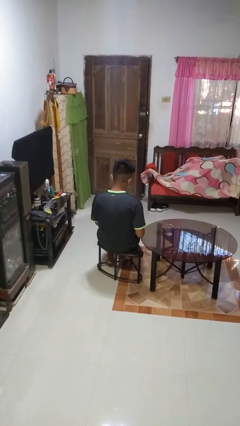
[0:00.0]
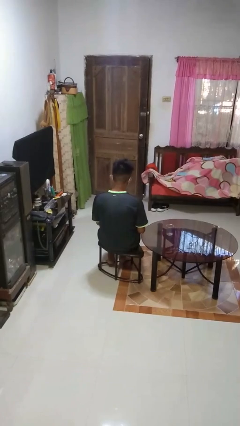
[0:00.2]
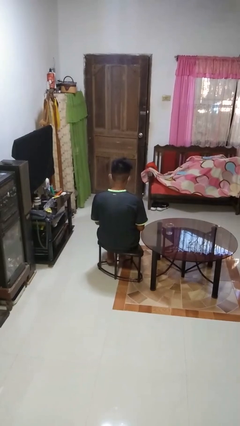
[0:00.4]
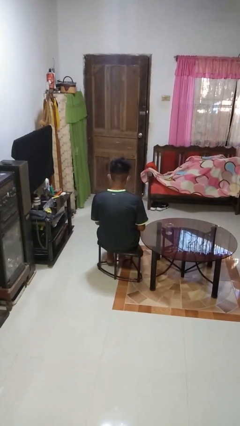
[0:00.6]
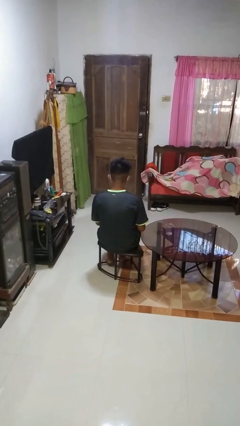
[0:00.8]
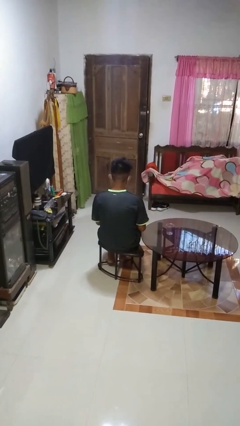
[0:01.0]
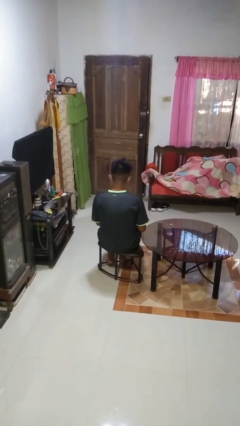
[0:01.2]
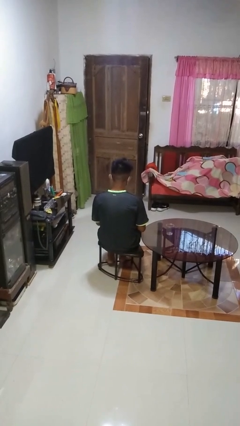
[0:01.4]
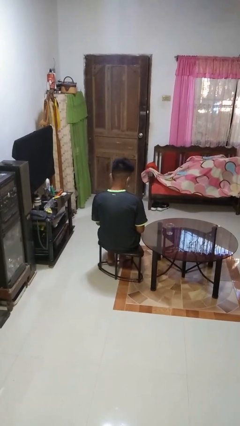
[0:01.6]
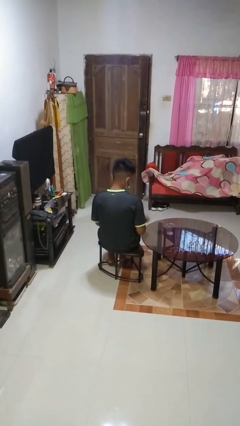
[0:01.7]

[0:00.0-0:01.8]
person opens beverage can

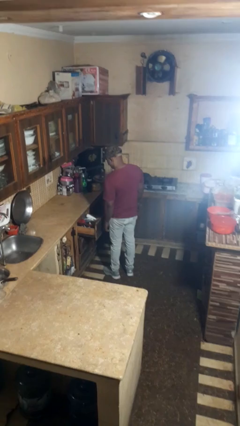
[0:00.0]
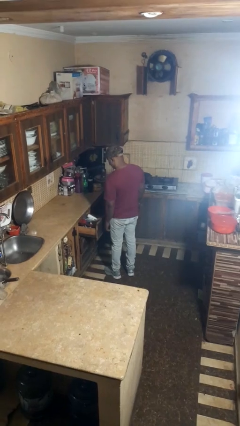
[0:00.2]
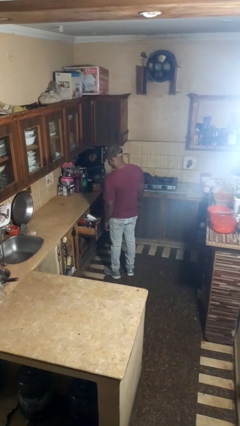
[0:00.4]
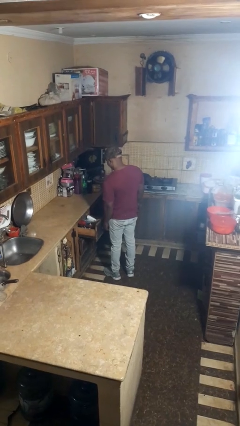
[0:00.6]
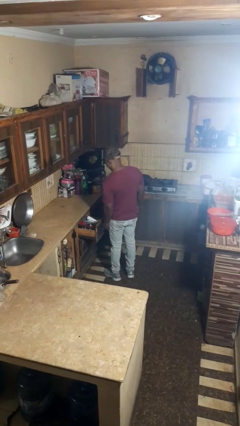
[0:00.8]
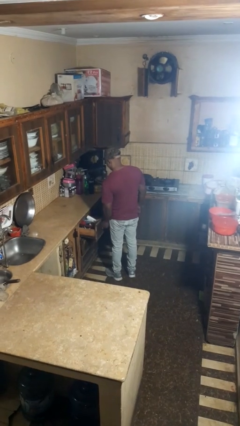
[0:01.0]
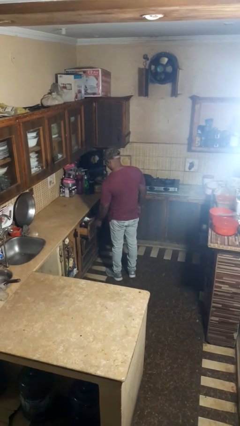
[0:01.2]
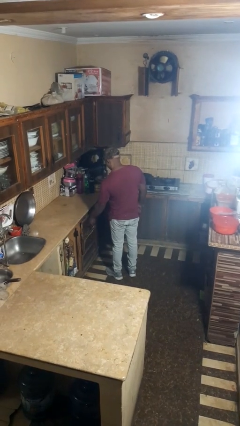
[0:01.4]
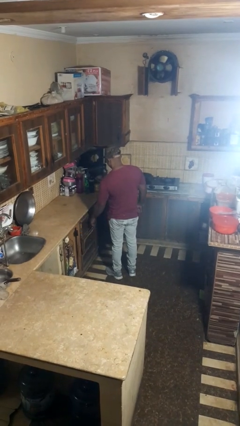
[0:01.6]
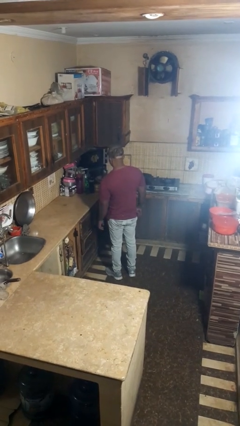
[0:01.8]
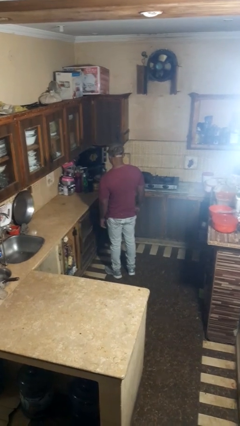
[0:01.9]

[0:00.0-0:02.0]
person closes kitchen drawer

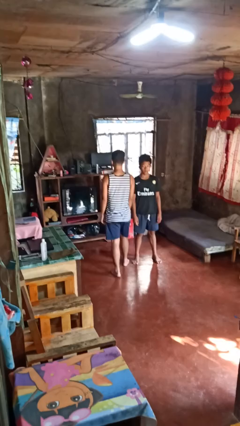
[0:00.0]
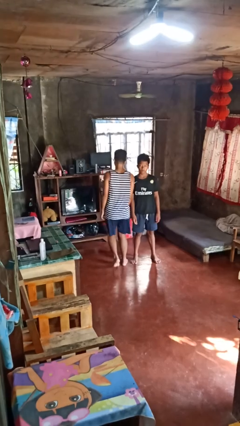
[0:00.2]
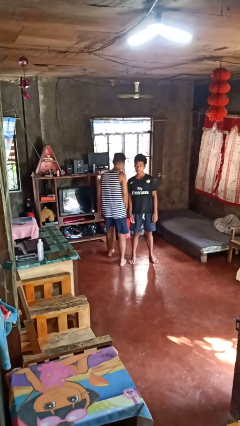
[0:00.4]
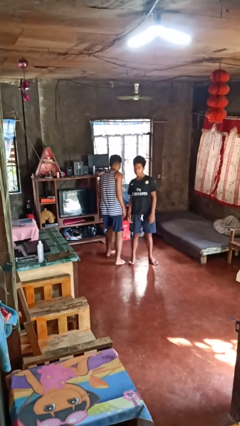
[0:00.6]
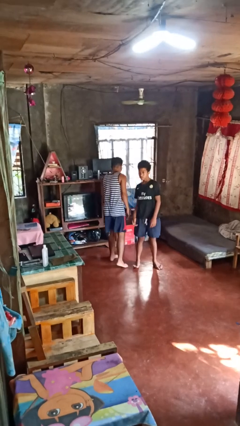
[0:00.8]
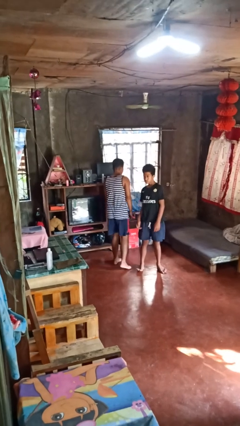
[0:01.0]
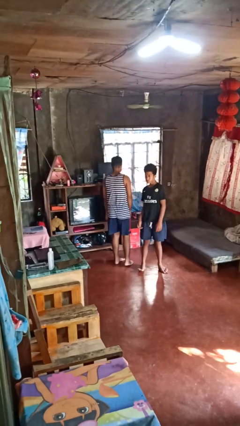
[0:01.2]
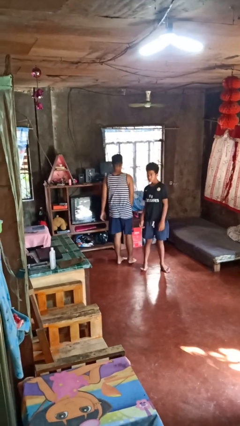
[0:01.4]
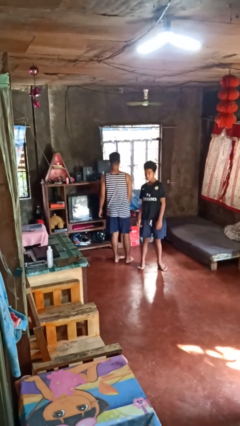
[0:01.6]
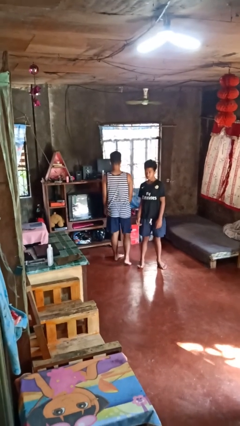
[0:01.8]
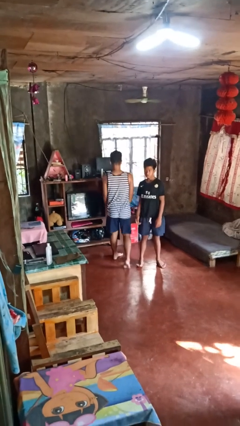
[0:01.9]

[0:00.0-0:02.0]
person bumps into person

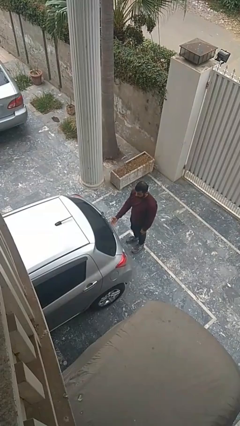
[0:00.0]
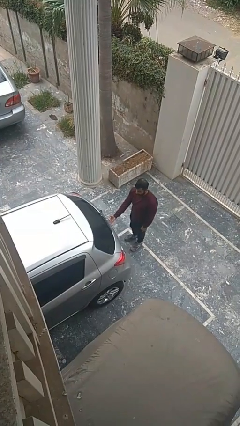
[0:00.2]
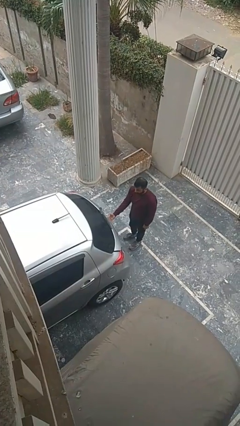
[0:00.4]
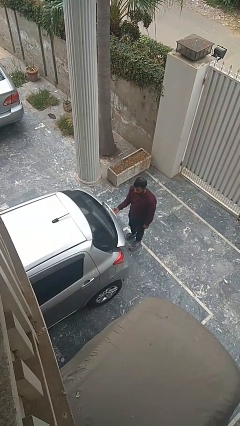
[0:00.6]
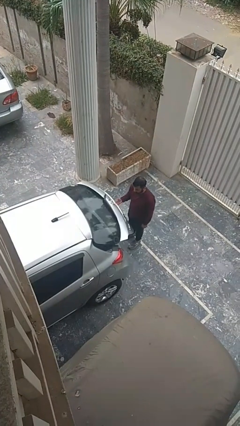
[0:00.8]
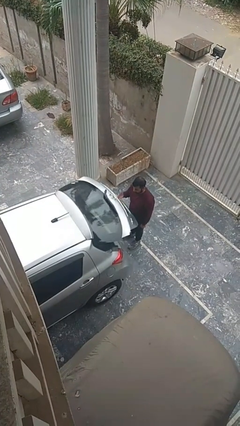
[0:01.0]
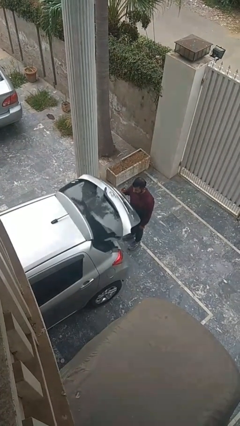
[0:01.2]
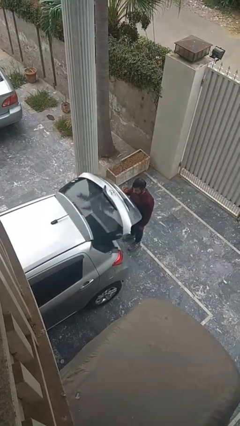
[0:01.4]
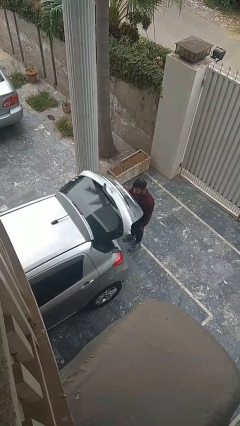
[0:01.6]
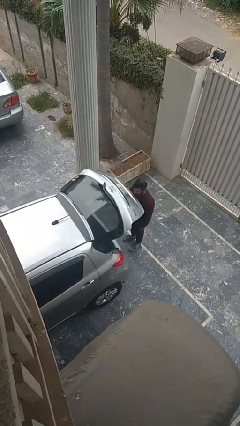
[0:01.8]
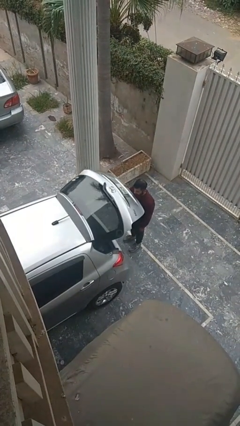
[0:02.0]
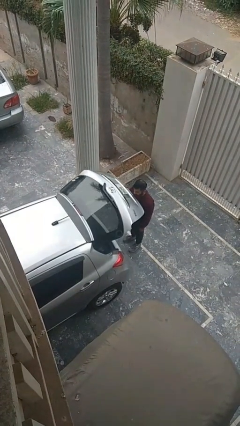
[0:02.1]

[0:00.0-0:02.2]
person opens car trunk

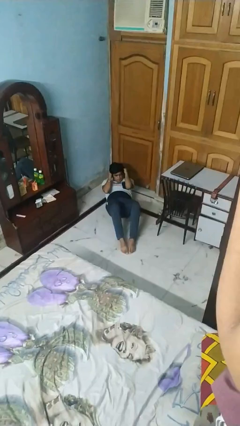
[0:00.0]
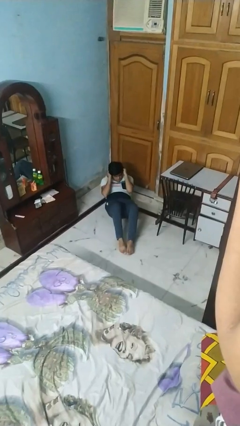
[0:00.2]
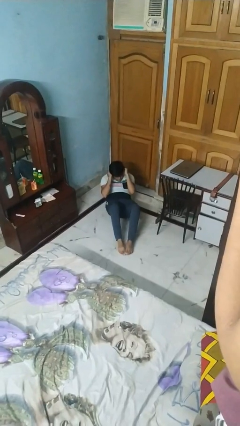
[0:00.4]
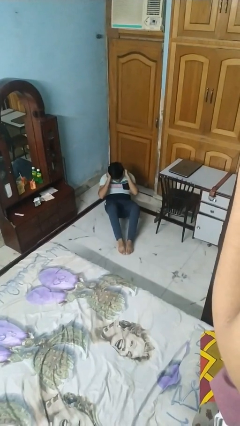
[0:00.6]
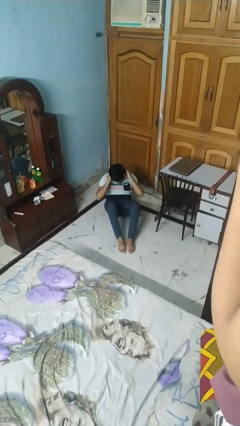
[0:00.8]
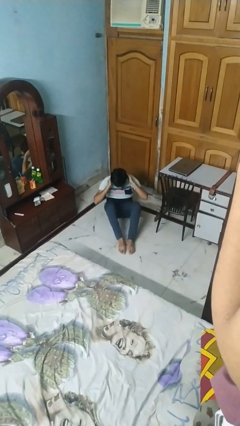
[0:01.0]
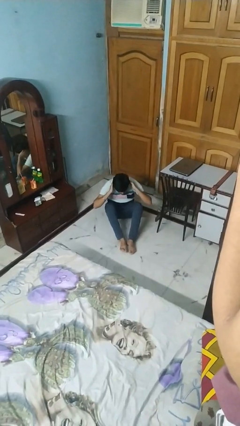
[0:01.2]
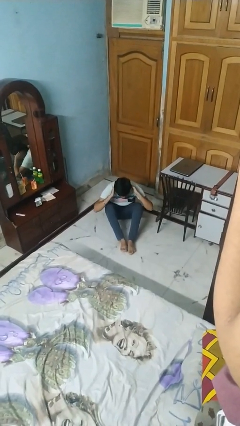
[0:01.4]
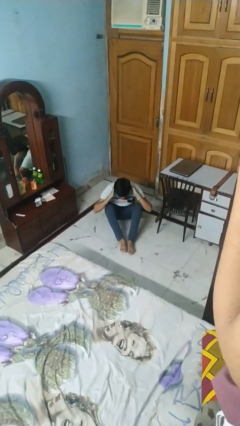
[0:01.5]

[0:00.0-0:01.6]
person exercises with situp

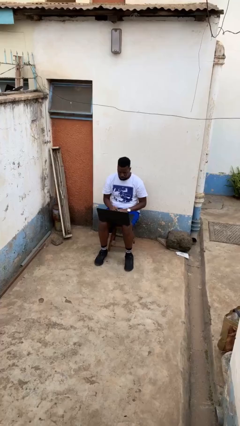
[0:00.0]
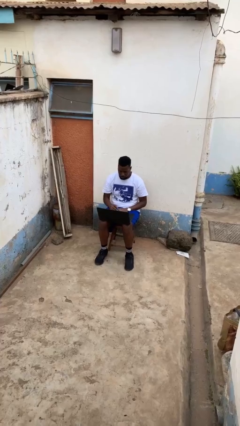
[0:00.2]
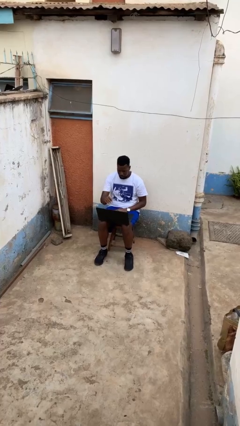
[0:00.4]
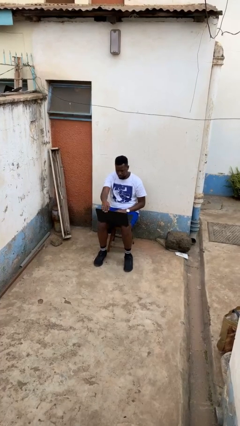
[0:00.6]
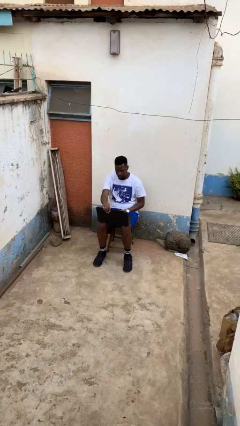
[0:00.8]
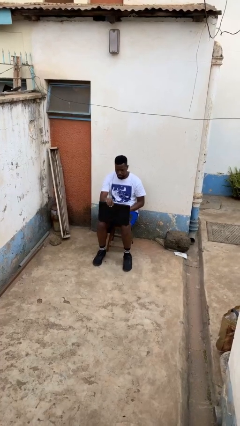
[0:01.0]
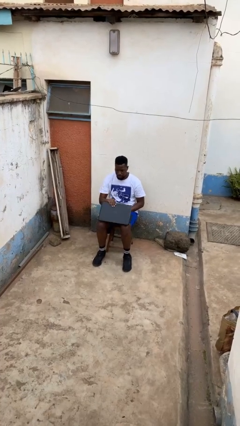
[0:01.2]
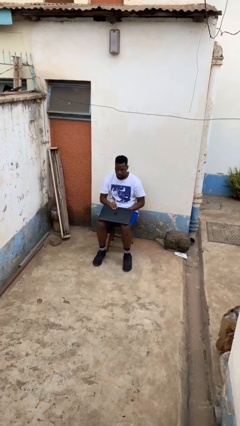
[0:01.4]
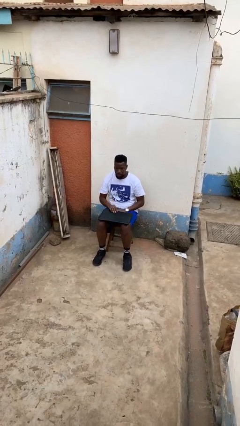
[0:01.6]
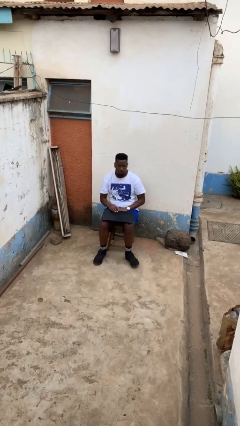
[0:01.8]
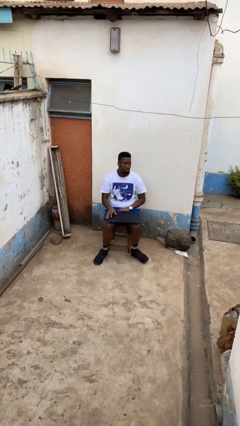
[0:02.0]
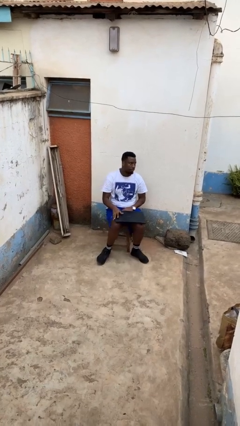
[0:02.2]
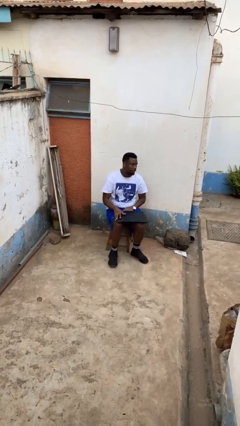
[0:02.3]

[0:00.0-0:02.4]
person closes laptop

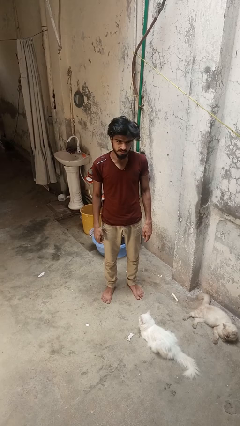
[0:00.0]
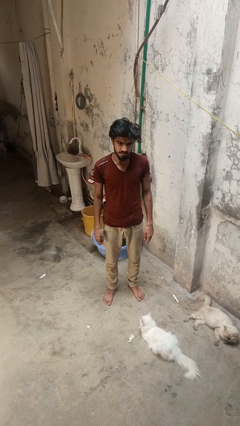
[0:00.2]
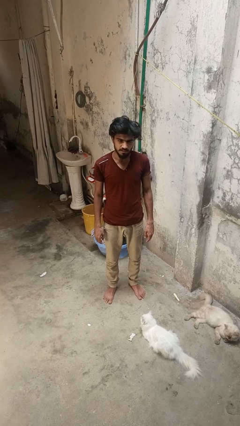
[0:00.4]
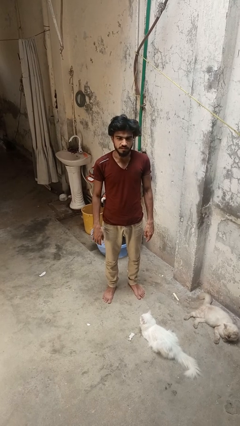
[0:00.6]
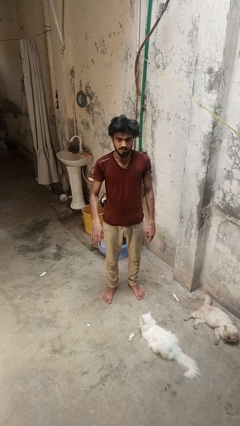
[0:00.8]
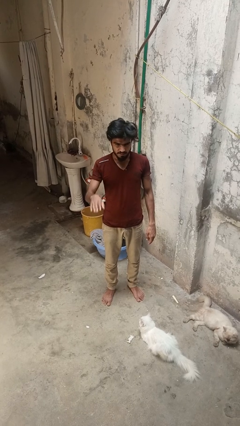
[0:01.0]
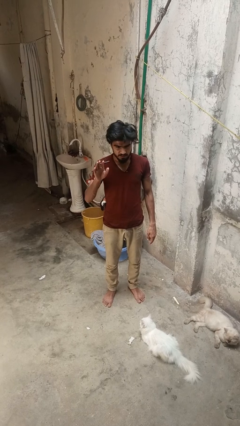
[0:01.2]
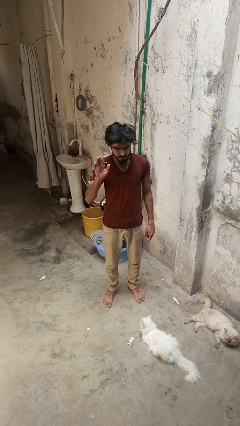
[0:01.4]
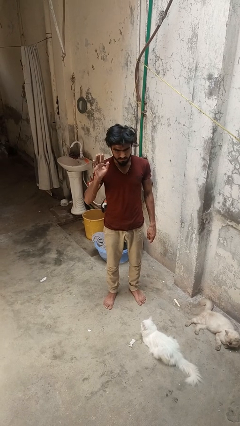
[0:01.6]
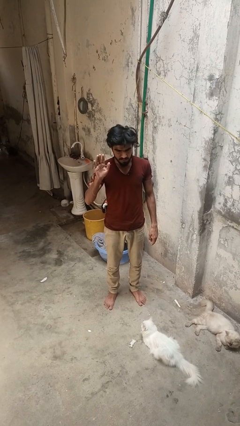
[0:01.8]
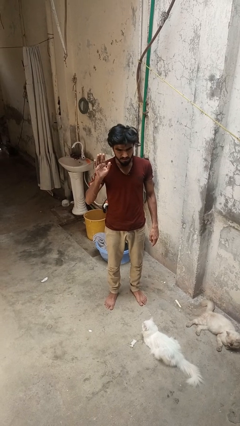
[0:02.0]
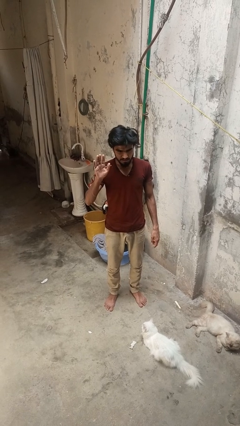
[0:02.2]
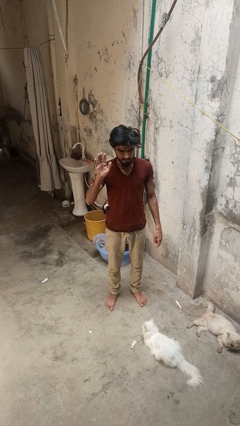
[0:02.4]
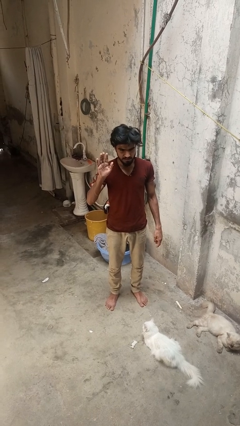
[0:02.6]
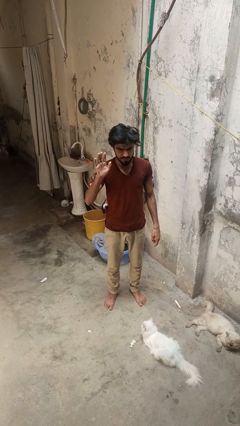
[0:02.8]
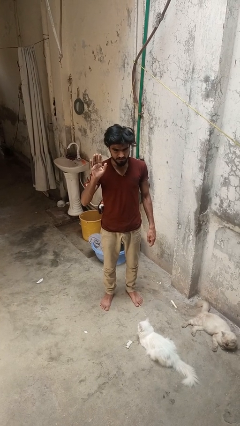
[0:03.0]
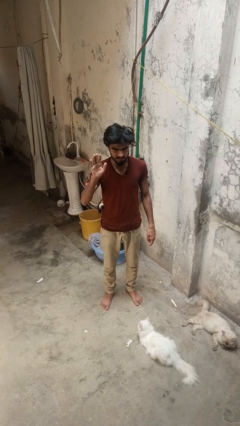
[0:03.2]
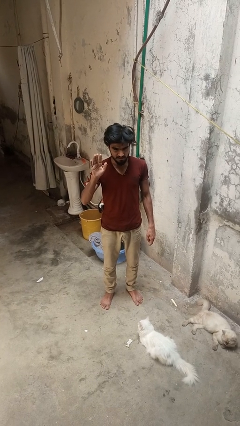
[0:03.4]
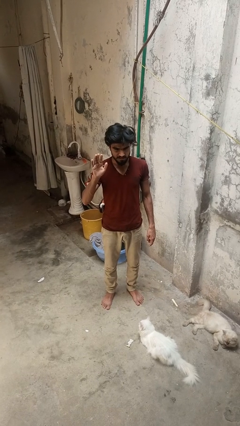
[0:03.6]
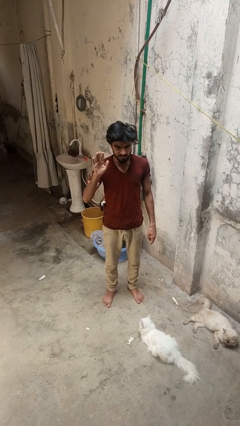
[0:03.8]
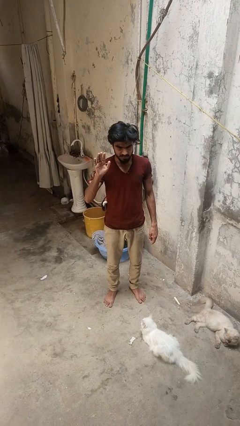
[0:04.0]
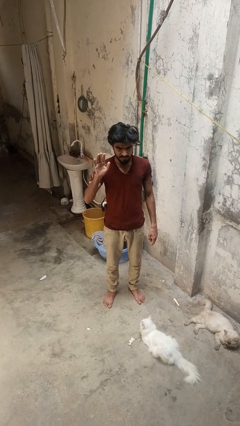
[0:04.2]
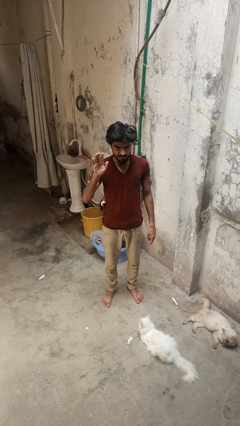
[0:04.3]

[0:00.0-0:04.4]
person gestures raise hand

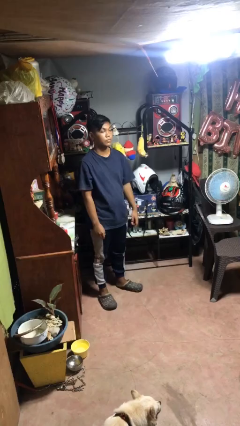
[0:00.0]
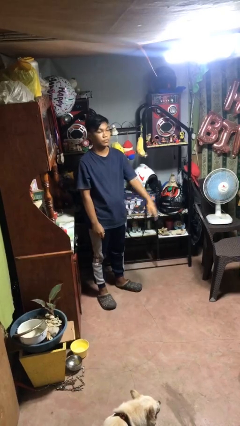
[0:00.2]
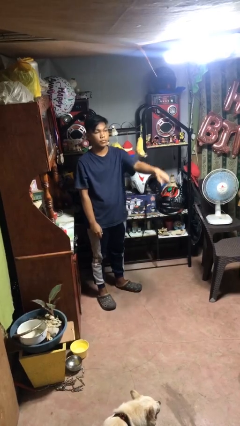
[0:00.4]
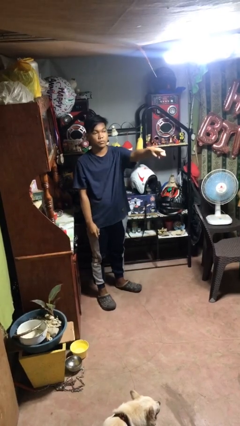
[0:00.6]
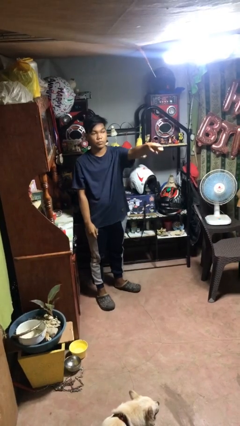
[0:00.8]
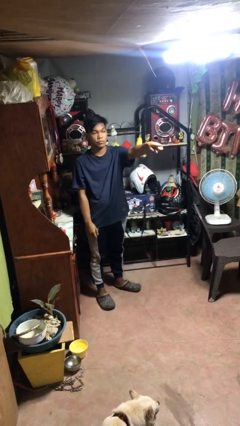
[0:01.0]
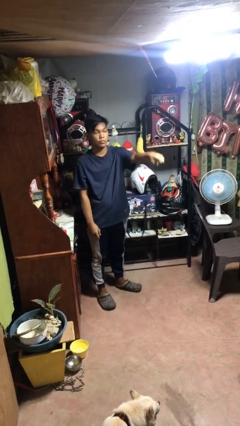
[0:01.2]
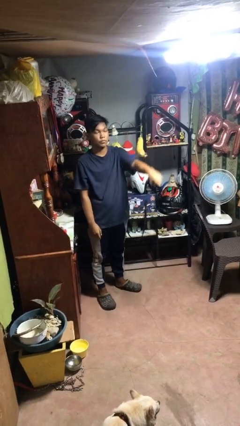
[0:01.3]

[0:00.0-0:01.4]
person points at person
